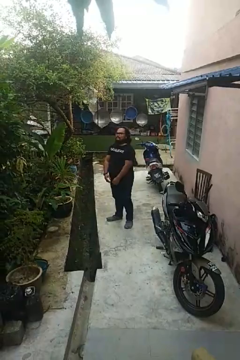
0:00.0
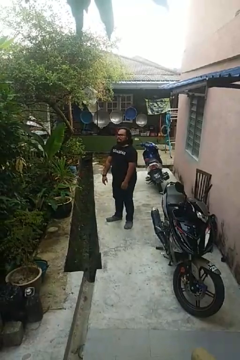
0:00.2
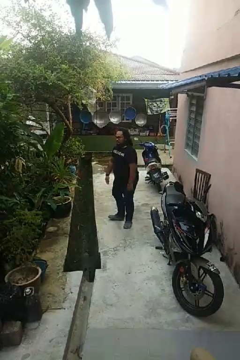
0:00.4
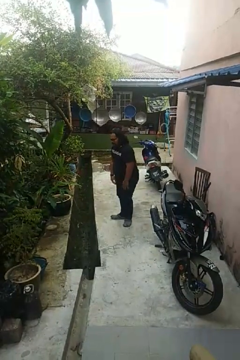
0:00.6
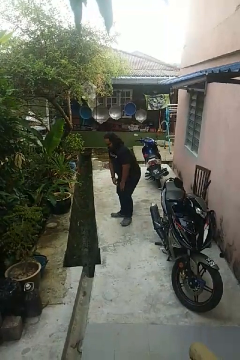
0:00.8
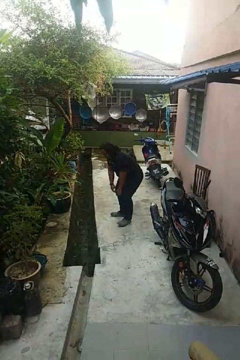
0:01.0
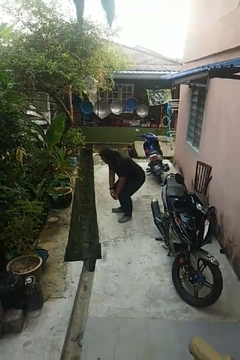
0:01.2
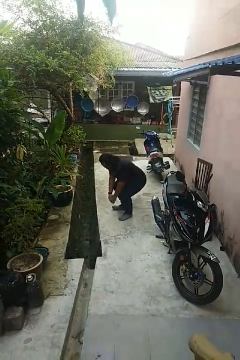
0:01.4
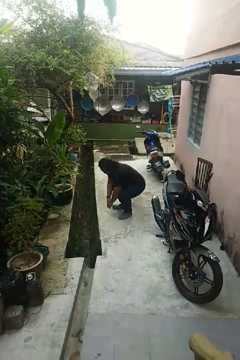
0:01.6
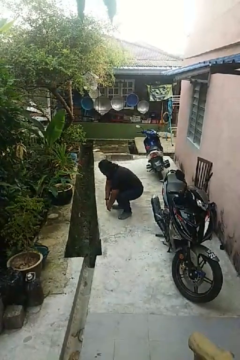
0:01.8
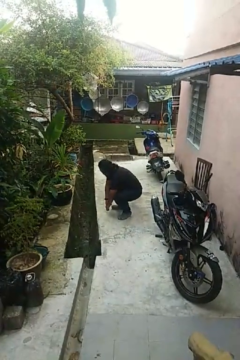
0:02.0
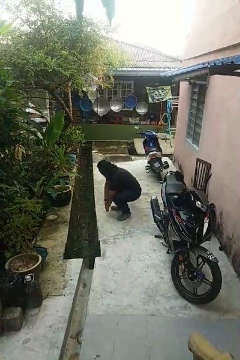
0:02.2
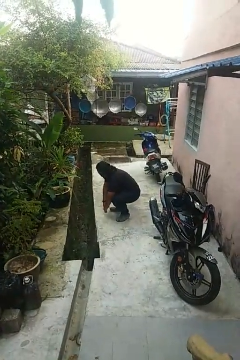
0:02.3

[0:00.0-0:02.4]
person squats

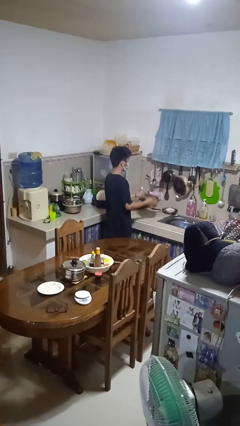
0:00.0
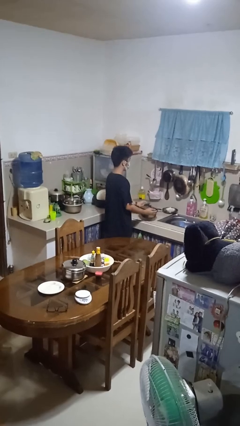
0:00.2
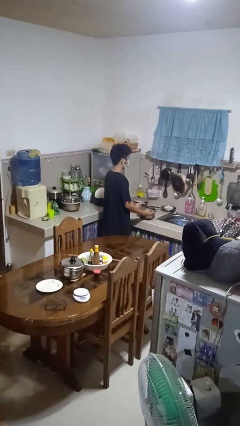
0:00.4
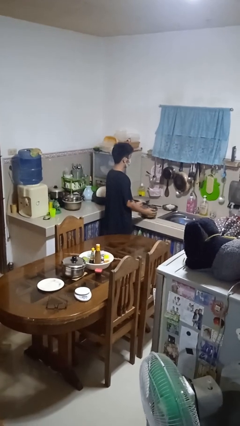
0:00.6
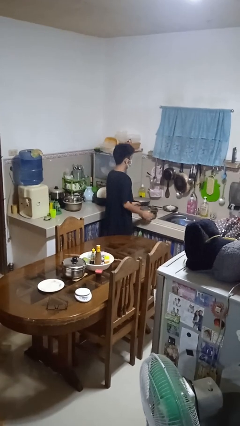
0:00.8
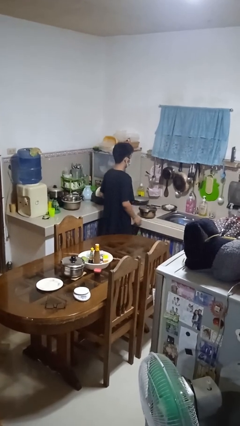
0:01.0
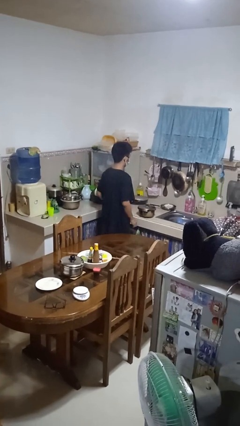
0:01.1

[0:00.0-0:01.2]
person puts down object on countertop

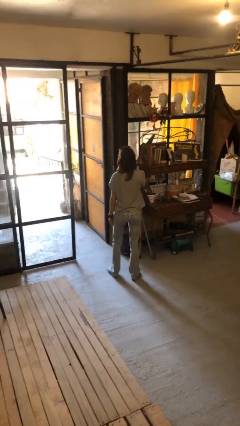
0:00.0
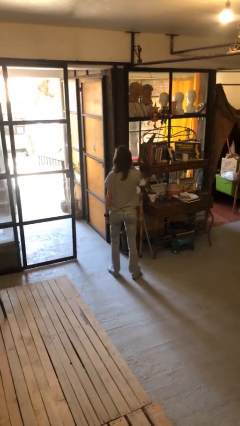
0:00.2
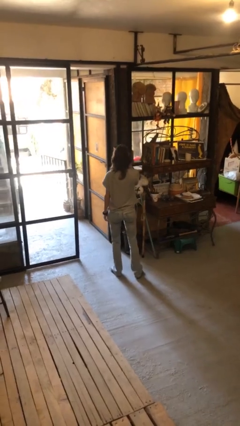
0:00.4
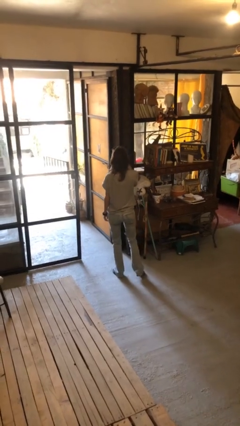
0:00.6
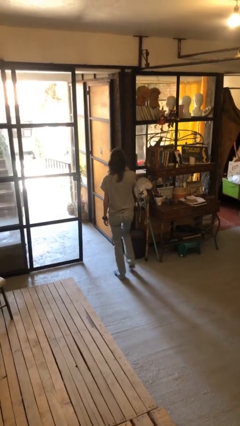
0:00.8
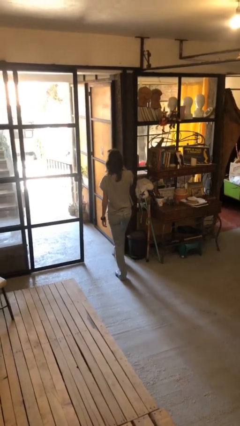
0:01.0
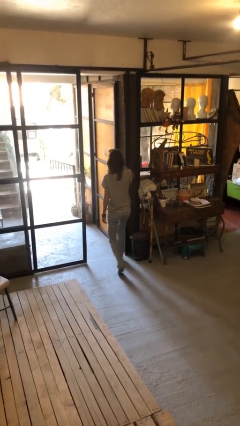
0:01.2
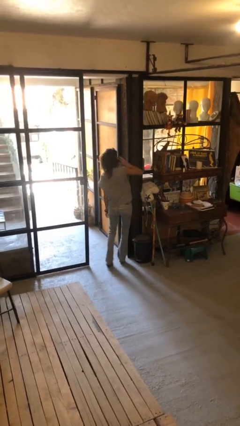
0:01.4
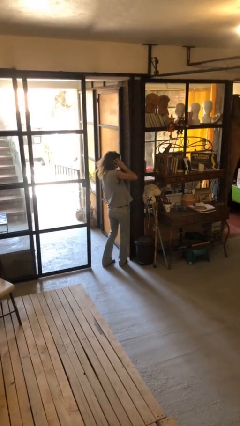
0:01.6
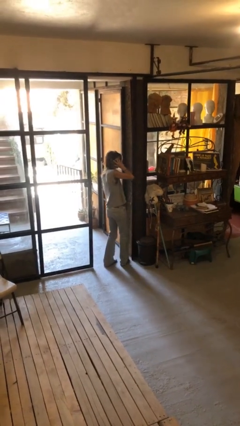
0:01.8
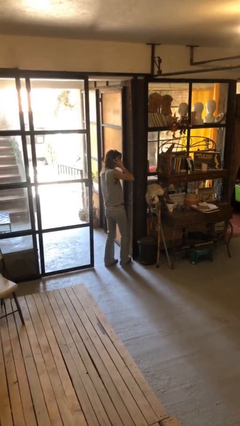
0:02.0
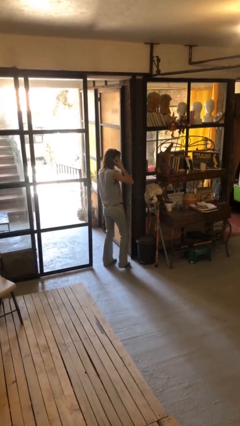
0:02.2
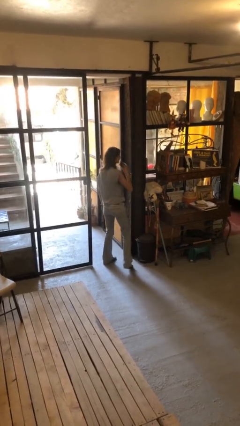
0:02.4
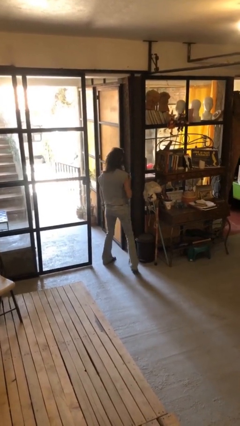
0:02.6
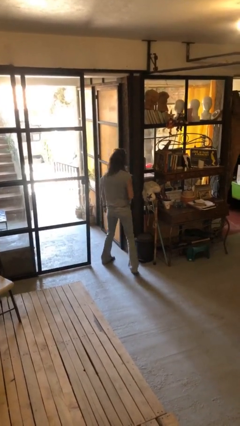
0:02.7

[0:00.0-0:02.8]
person bumps into wall

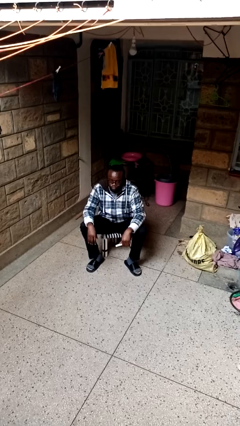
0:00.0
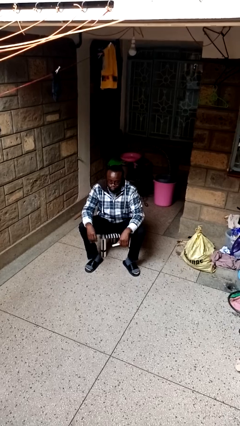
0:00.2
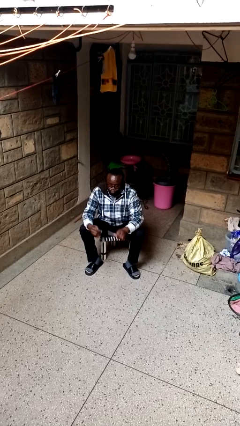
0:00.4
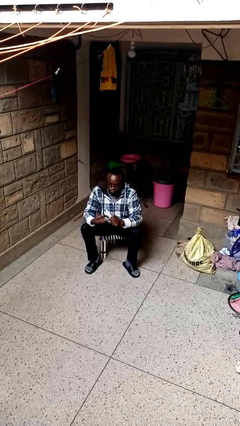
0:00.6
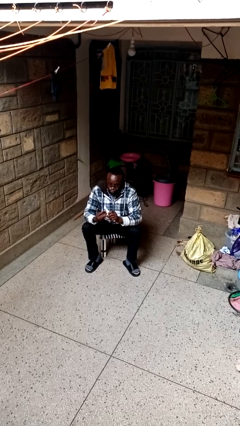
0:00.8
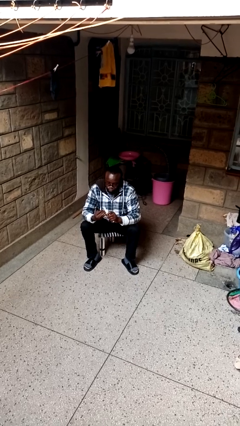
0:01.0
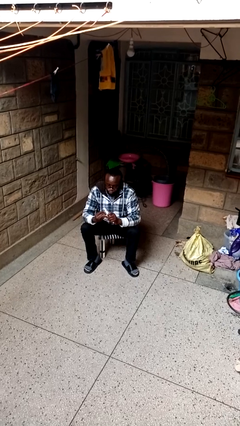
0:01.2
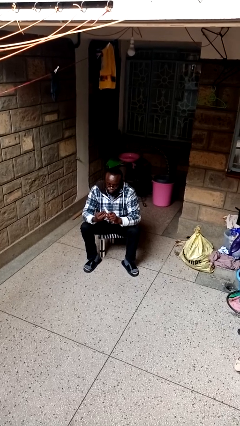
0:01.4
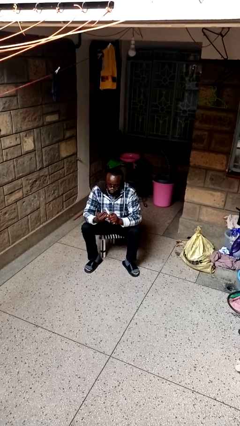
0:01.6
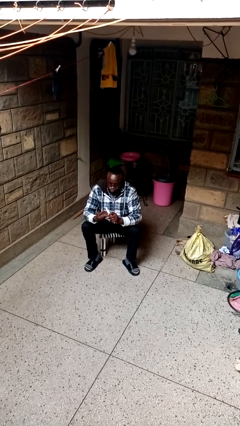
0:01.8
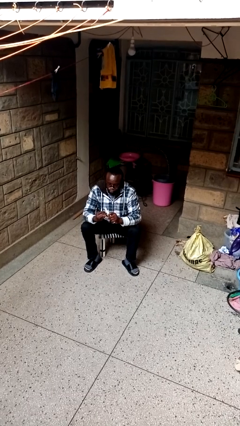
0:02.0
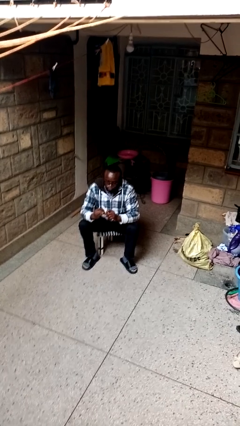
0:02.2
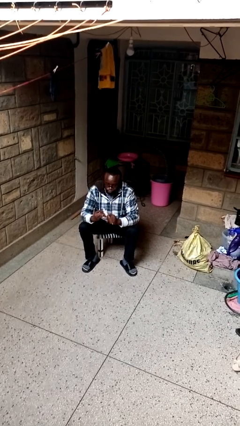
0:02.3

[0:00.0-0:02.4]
person files fingernails

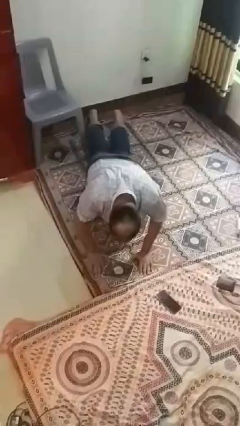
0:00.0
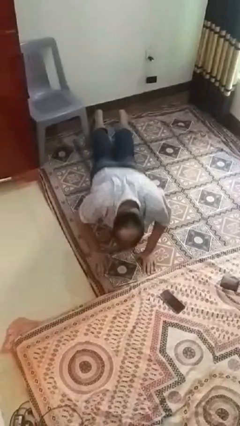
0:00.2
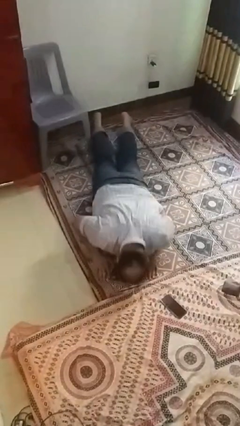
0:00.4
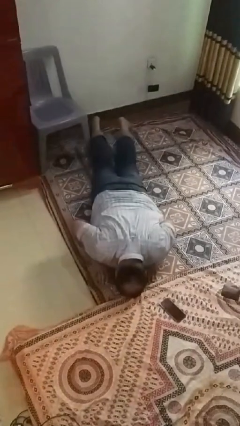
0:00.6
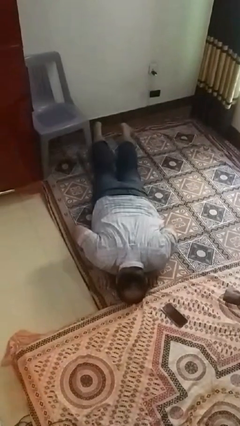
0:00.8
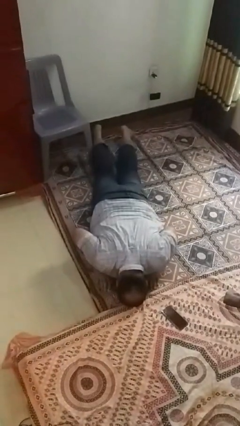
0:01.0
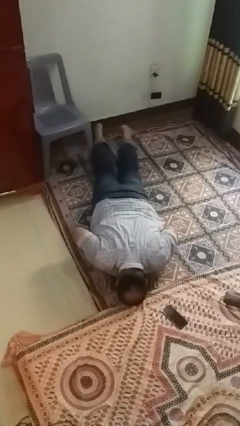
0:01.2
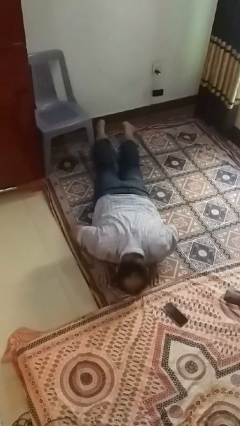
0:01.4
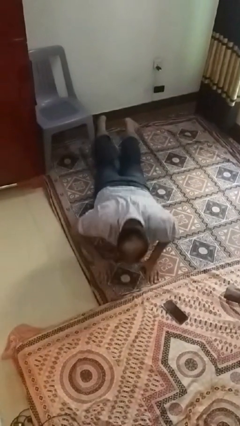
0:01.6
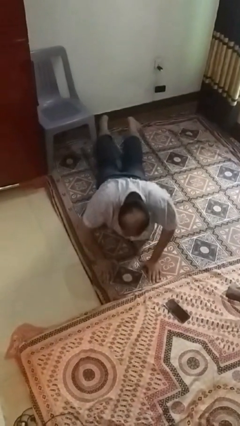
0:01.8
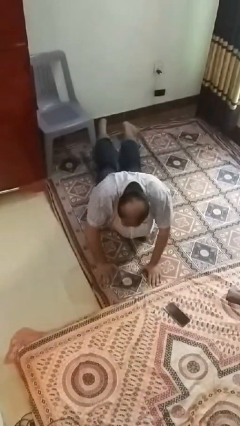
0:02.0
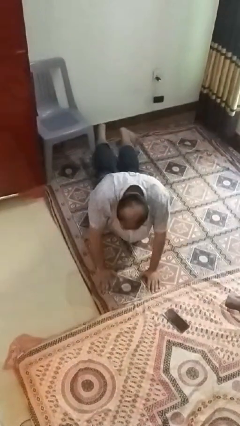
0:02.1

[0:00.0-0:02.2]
person exercises with pushup

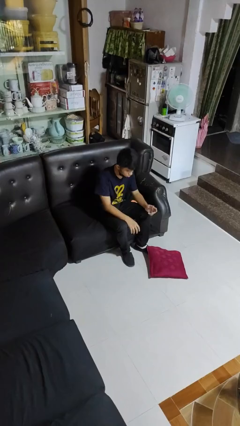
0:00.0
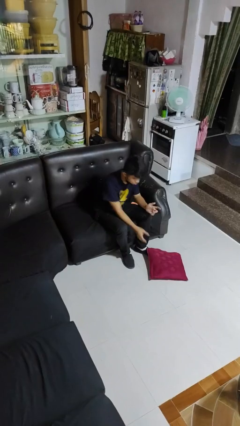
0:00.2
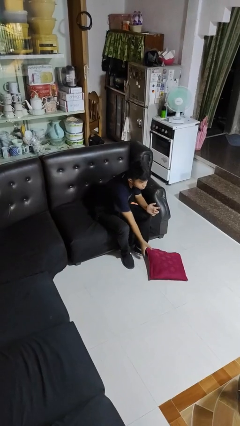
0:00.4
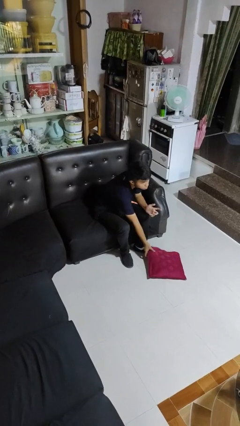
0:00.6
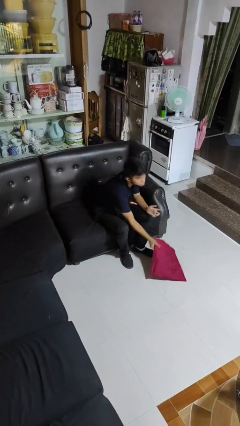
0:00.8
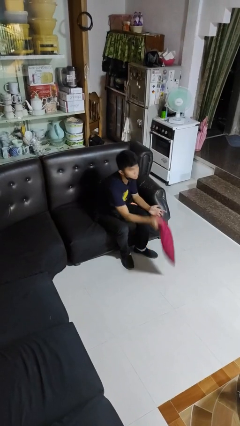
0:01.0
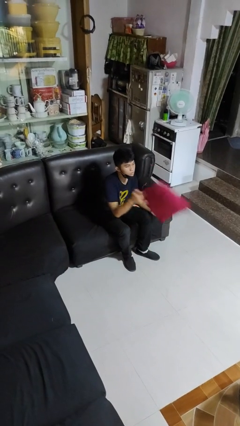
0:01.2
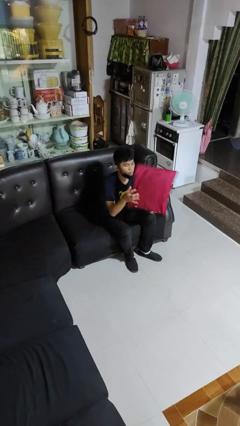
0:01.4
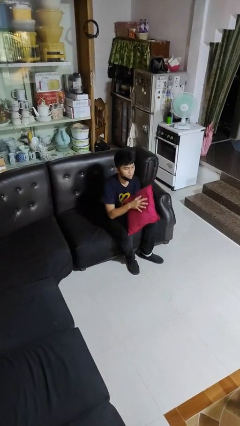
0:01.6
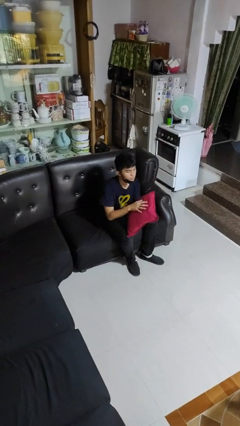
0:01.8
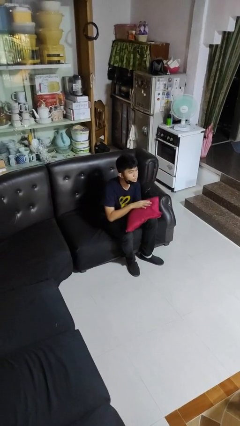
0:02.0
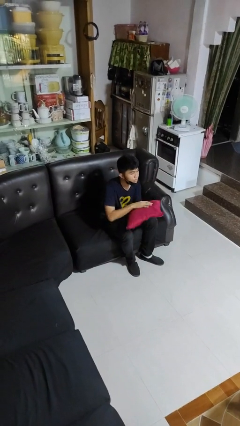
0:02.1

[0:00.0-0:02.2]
person picks up object from floor

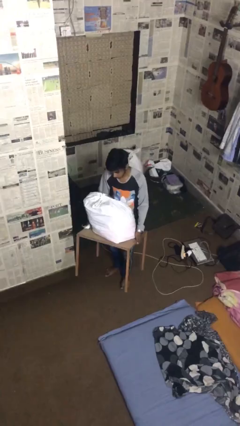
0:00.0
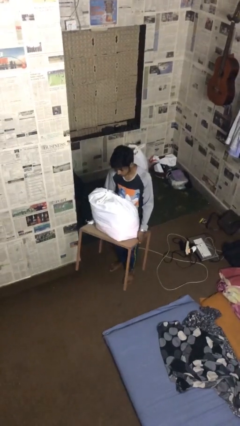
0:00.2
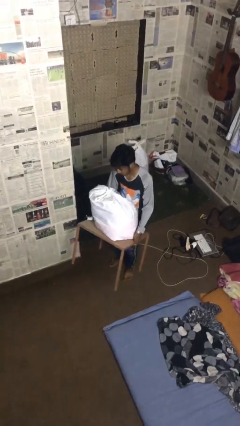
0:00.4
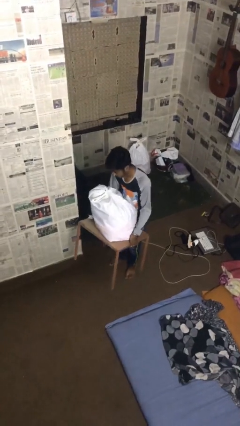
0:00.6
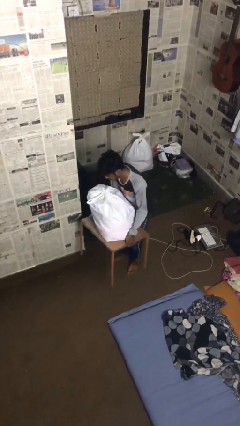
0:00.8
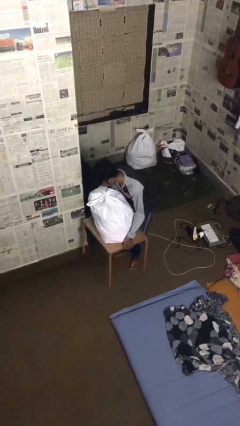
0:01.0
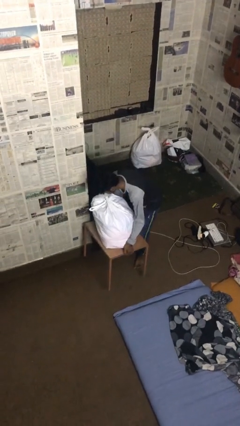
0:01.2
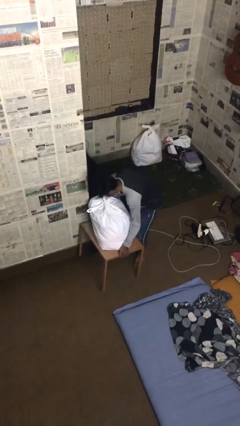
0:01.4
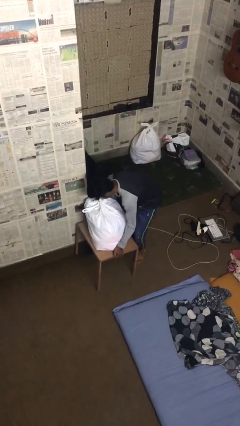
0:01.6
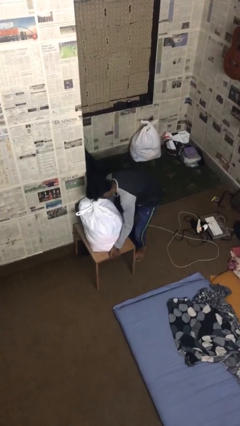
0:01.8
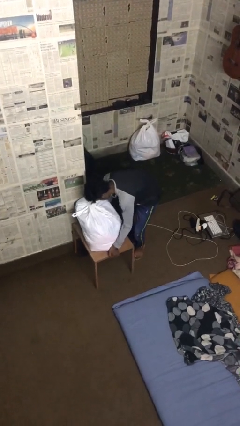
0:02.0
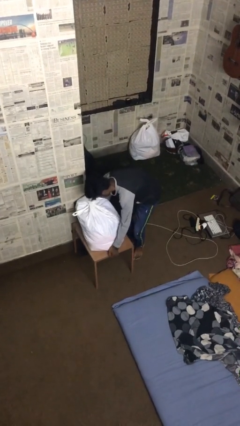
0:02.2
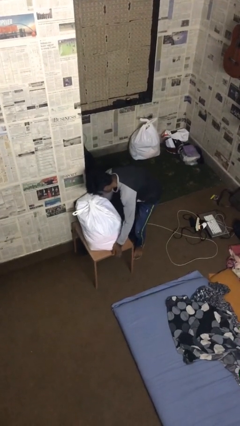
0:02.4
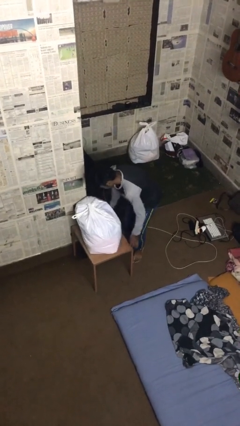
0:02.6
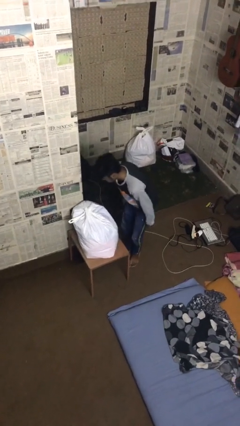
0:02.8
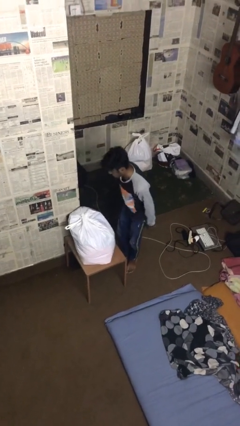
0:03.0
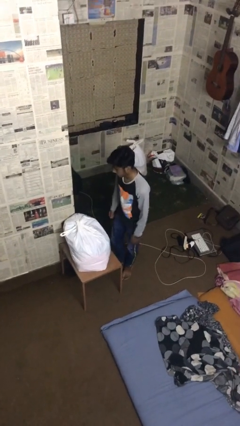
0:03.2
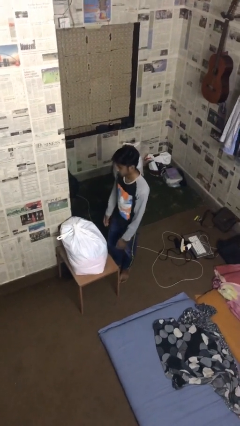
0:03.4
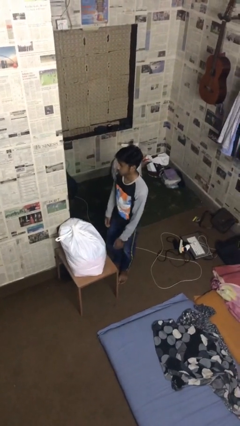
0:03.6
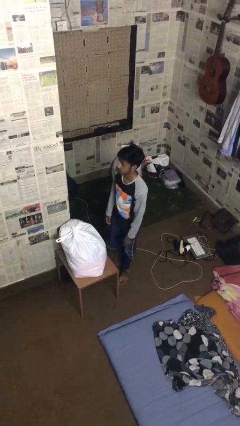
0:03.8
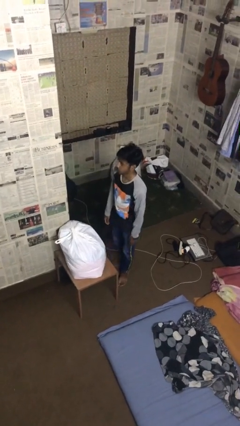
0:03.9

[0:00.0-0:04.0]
person puts down object on floor
